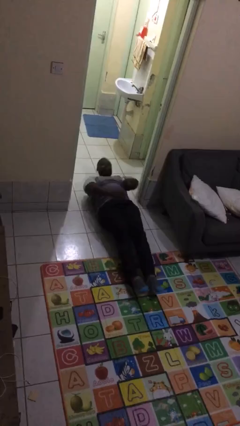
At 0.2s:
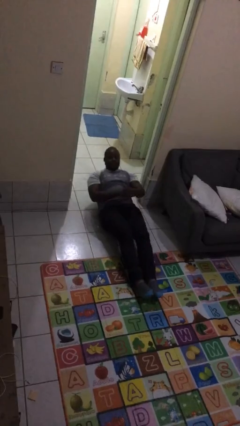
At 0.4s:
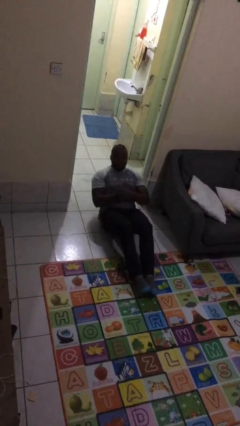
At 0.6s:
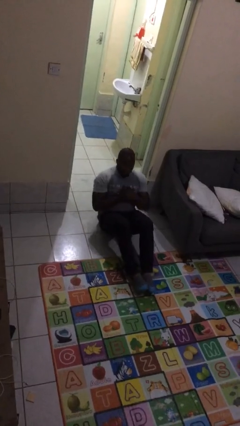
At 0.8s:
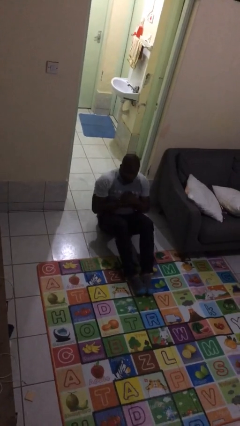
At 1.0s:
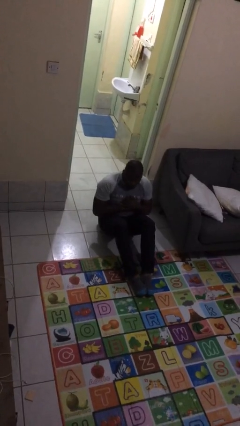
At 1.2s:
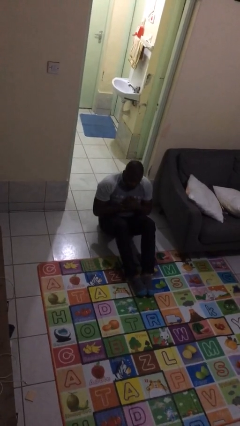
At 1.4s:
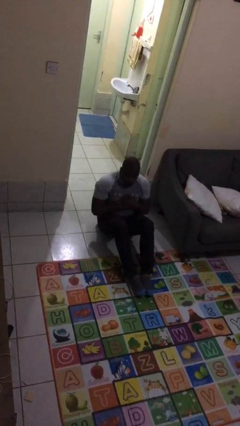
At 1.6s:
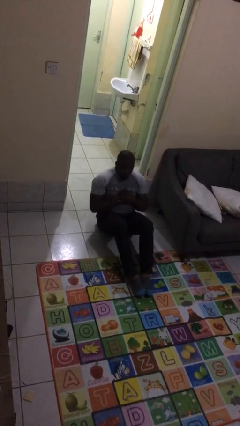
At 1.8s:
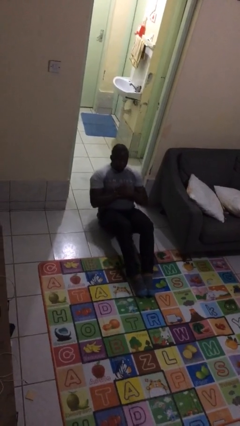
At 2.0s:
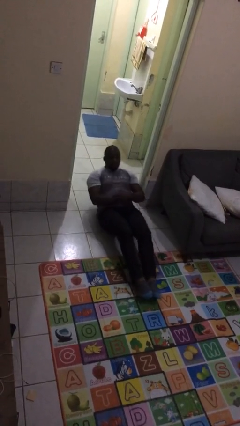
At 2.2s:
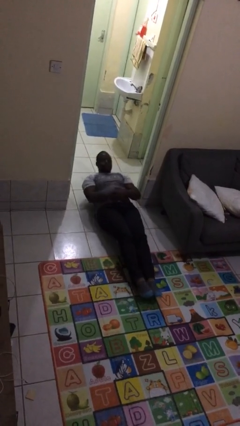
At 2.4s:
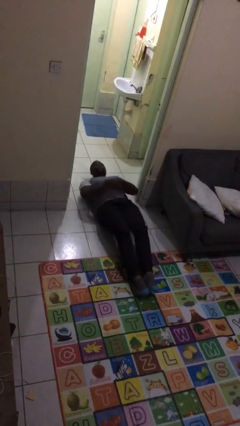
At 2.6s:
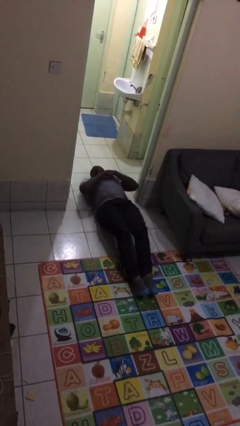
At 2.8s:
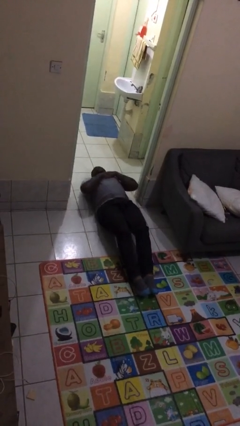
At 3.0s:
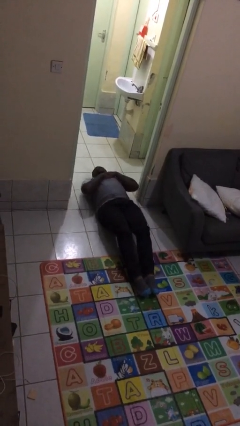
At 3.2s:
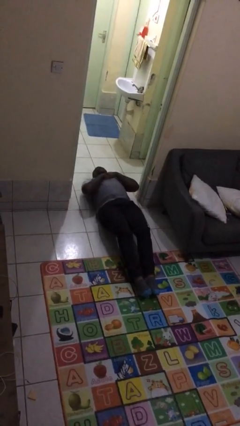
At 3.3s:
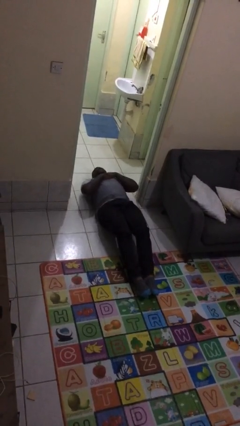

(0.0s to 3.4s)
person exercises with situp

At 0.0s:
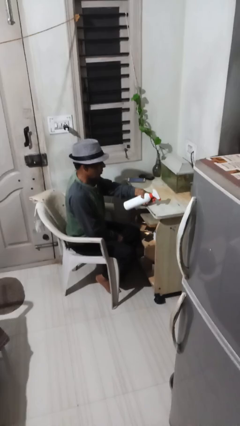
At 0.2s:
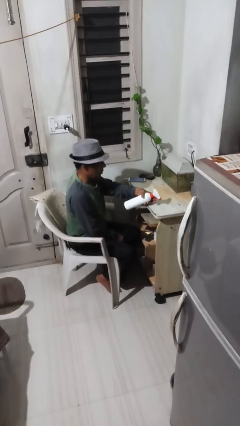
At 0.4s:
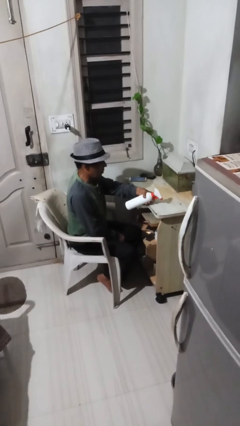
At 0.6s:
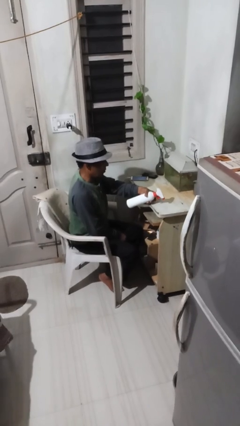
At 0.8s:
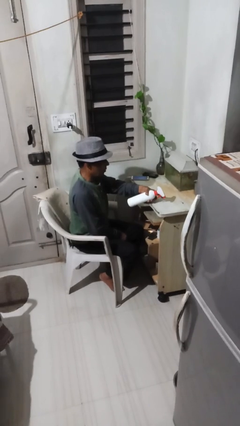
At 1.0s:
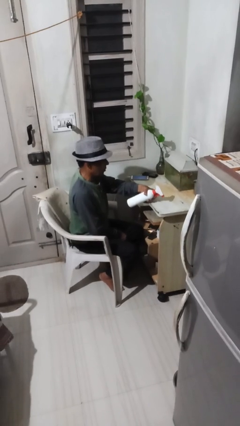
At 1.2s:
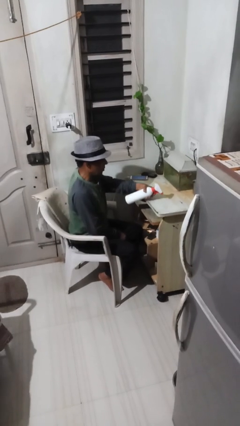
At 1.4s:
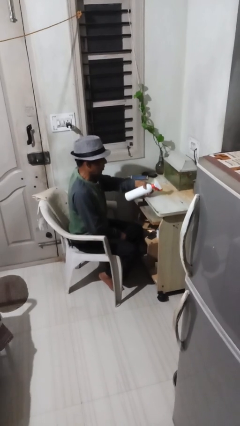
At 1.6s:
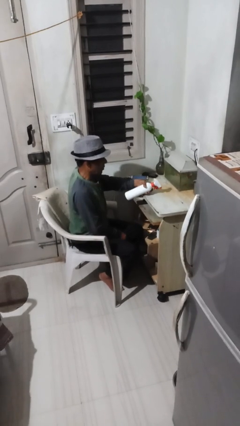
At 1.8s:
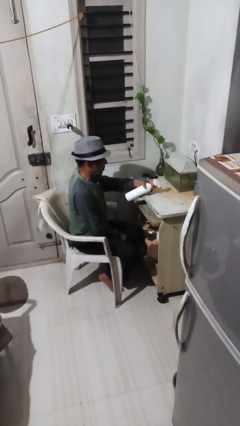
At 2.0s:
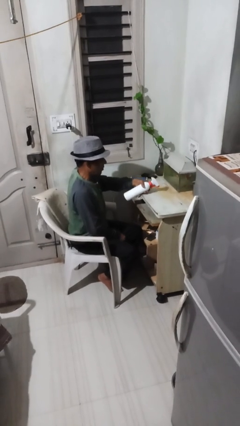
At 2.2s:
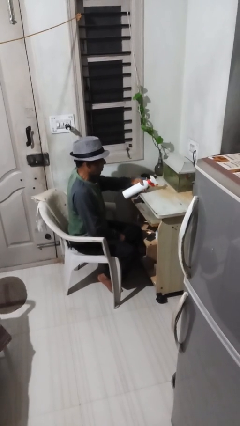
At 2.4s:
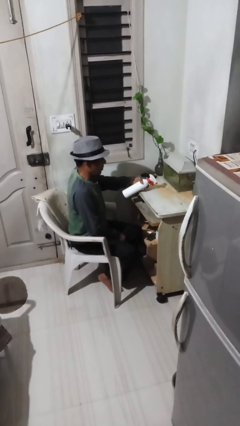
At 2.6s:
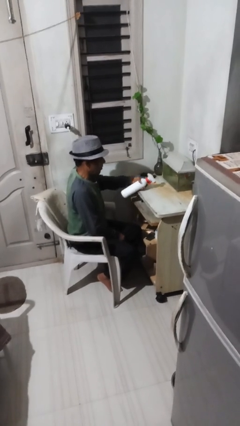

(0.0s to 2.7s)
person sprays from bottle

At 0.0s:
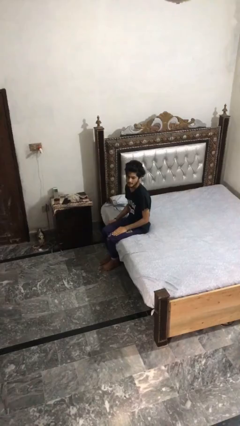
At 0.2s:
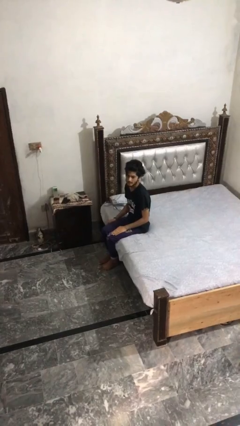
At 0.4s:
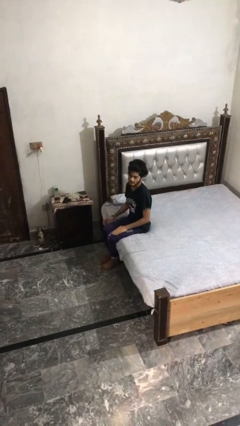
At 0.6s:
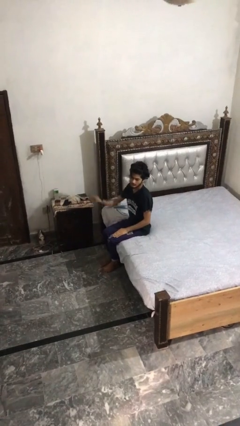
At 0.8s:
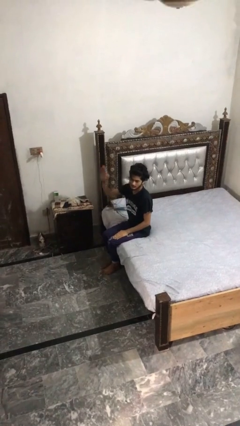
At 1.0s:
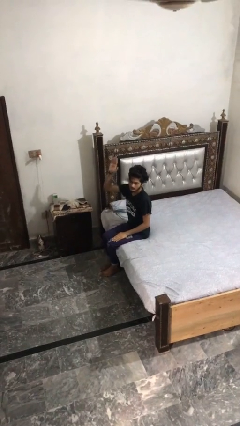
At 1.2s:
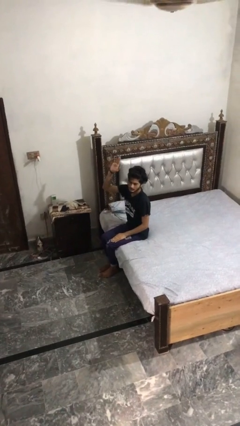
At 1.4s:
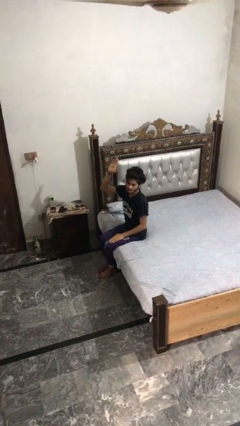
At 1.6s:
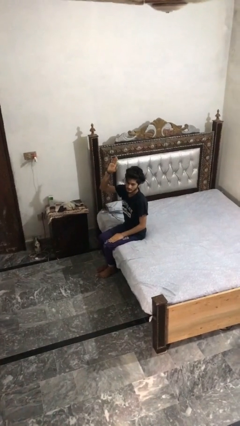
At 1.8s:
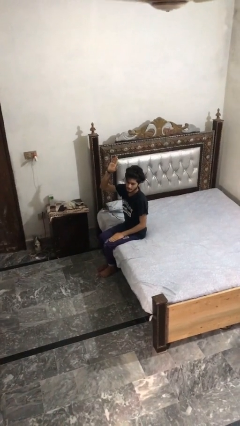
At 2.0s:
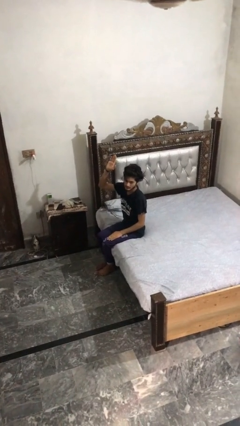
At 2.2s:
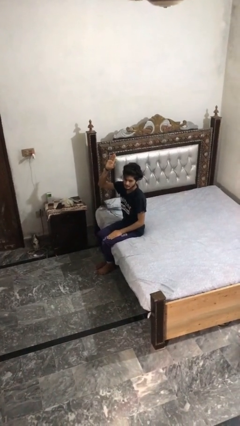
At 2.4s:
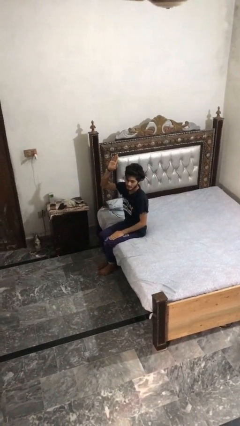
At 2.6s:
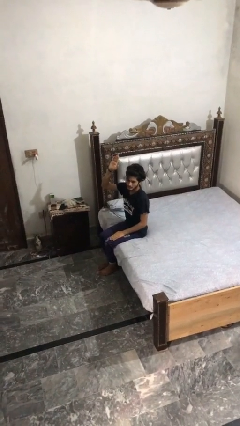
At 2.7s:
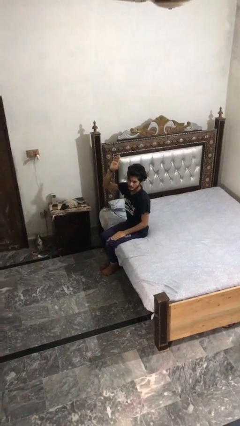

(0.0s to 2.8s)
person gestures raise hand

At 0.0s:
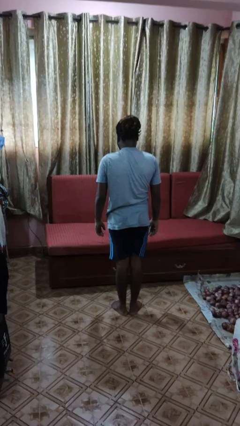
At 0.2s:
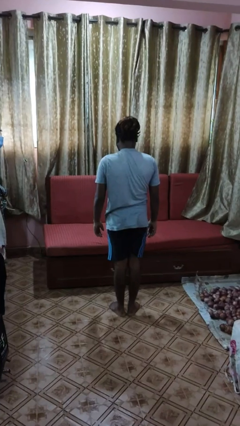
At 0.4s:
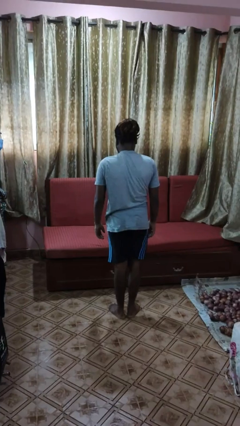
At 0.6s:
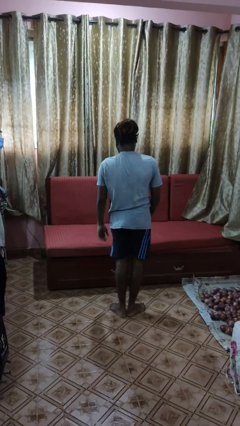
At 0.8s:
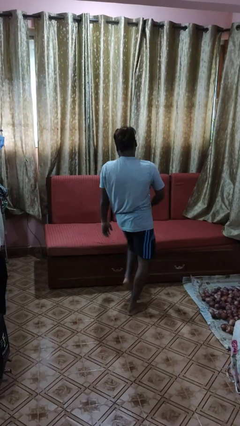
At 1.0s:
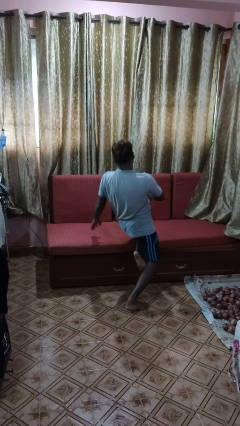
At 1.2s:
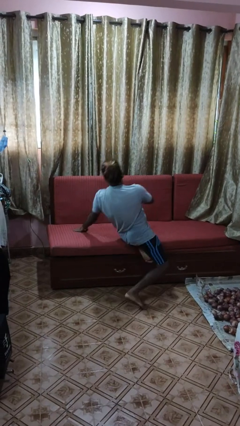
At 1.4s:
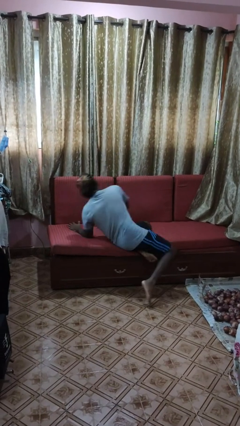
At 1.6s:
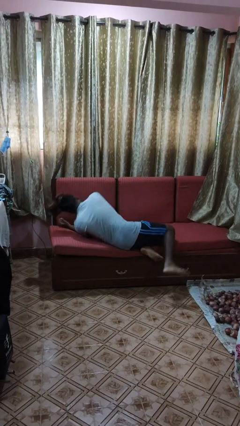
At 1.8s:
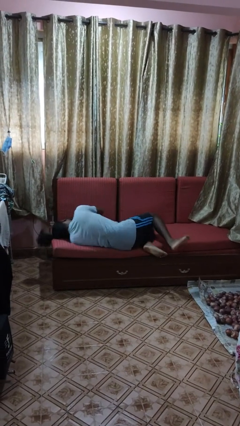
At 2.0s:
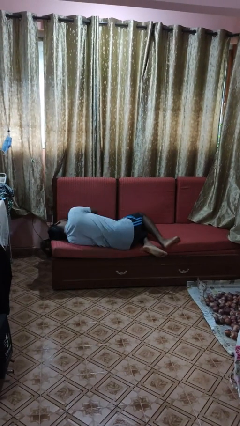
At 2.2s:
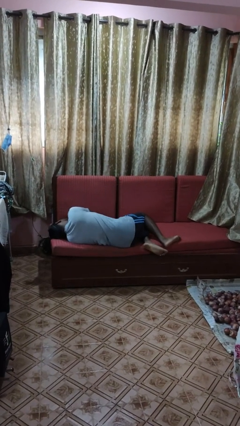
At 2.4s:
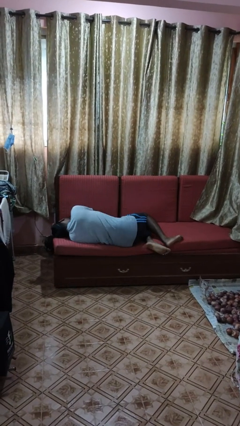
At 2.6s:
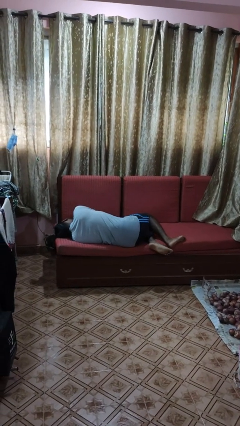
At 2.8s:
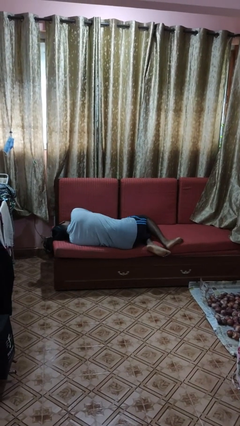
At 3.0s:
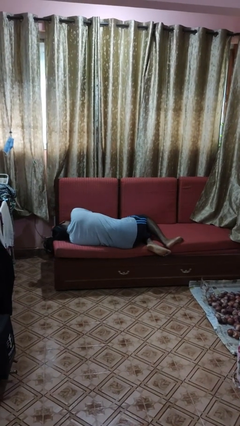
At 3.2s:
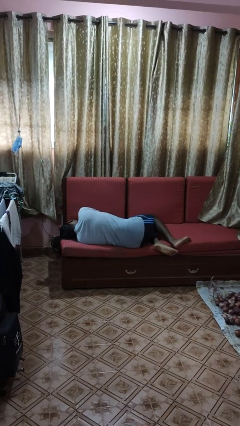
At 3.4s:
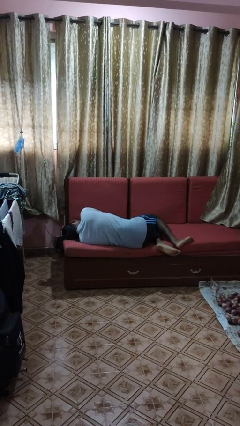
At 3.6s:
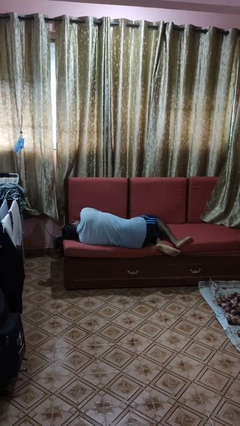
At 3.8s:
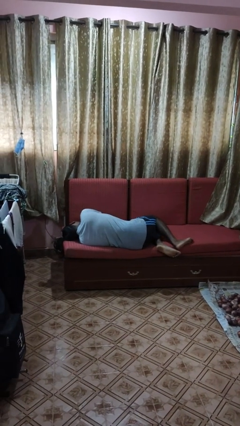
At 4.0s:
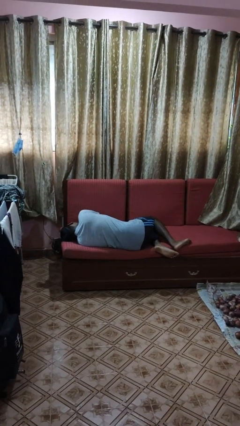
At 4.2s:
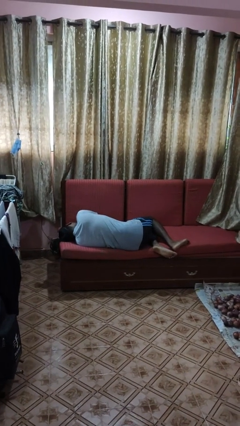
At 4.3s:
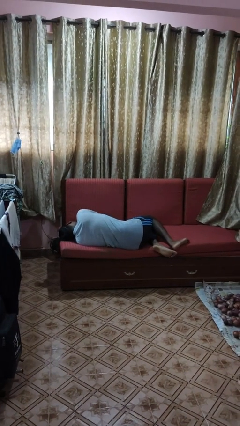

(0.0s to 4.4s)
person lies down on couch

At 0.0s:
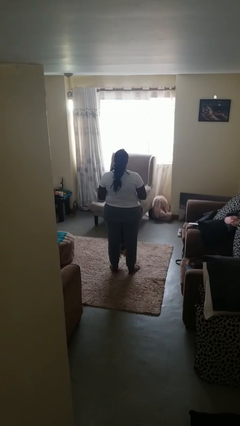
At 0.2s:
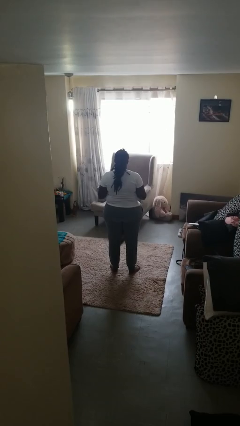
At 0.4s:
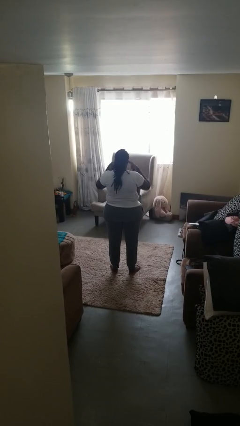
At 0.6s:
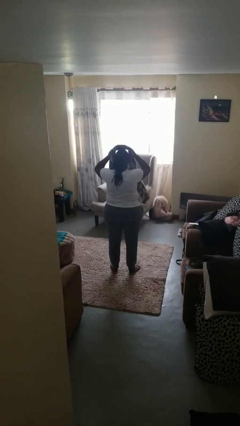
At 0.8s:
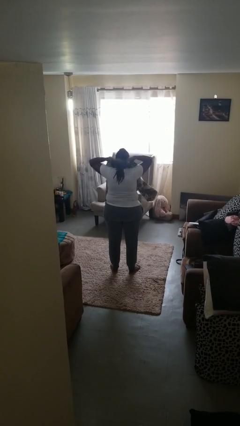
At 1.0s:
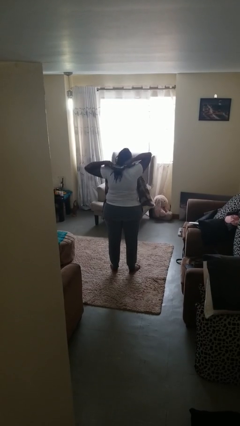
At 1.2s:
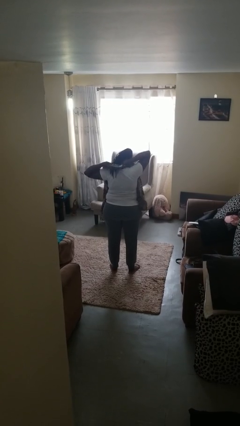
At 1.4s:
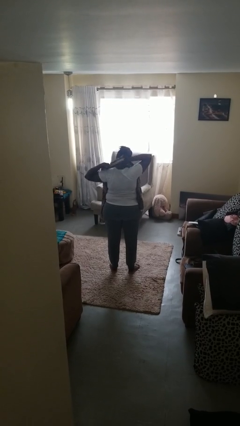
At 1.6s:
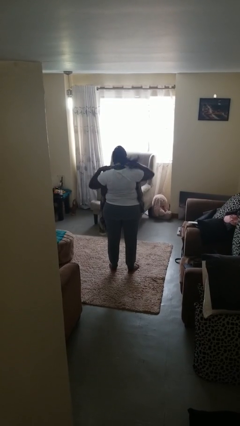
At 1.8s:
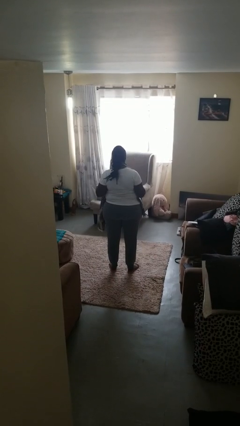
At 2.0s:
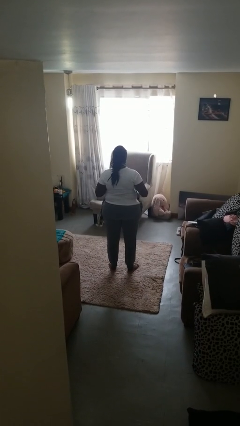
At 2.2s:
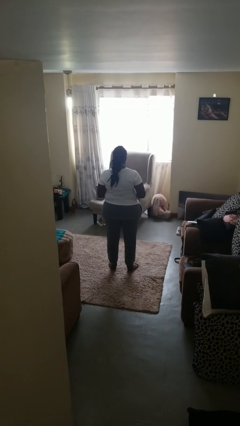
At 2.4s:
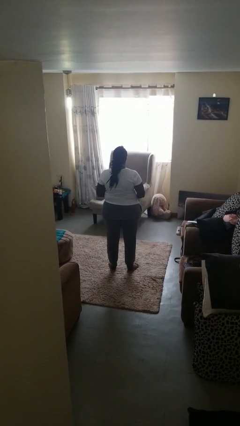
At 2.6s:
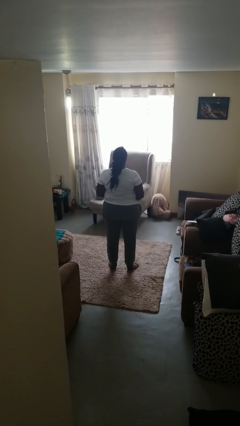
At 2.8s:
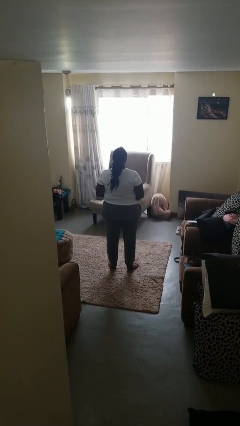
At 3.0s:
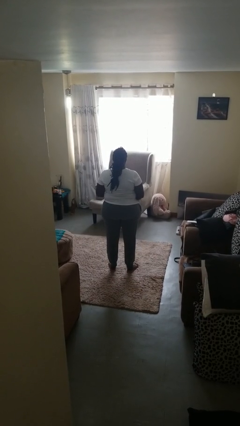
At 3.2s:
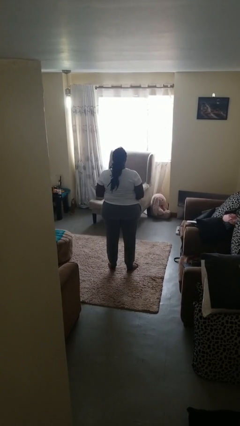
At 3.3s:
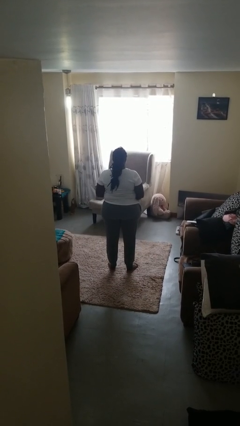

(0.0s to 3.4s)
person puts on scarf

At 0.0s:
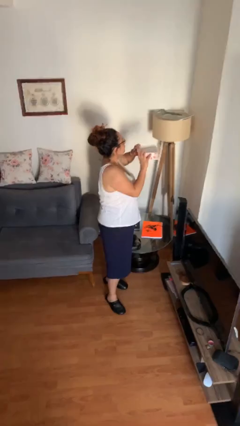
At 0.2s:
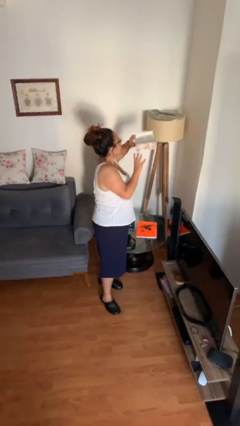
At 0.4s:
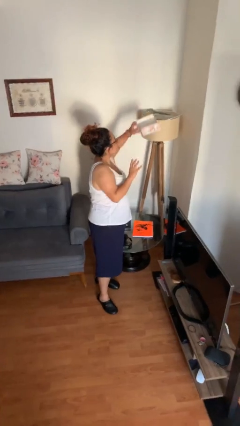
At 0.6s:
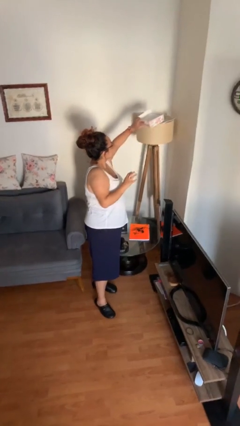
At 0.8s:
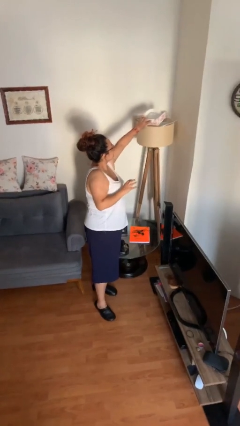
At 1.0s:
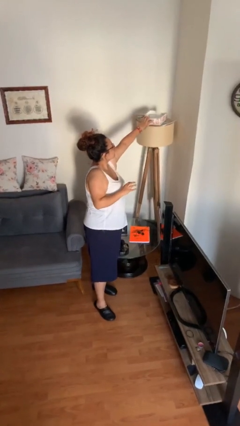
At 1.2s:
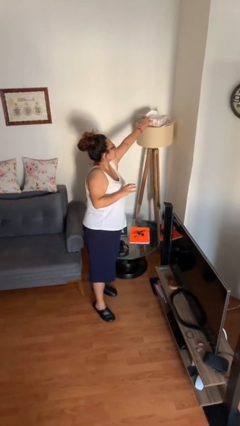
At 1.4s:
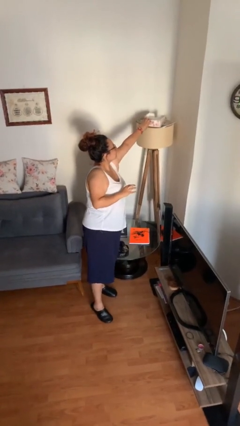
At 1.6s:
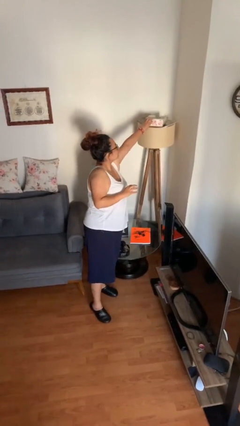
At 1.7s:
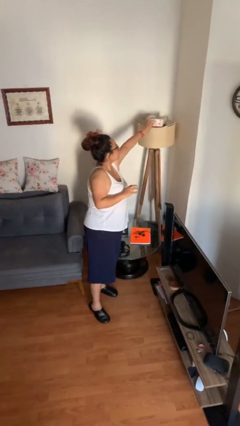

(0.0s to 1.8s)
person puts down object on shelf
